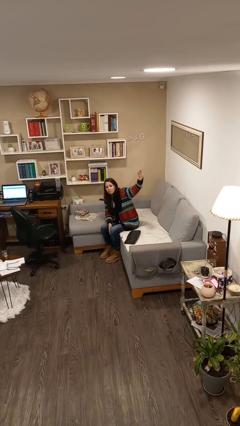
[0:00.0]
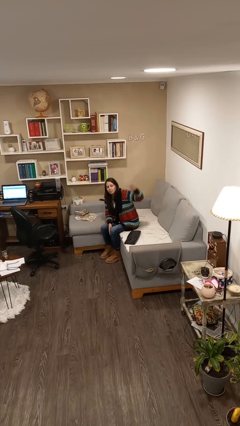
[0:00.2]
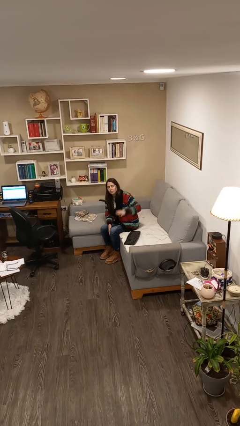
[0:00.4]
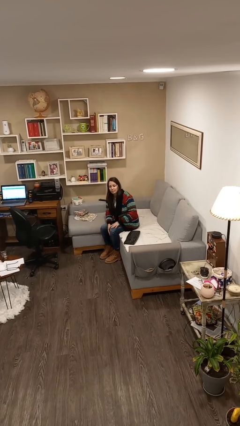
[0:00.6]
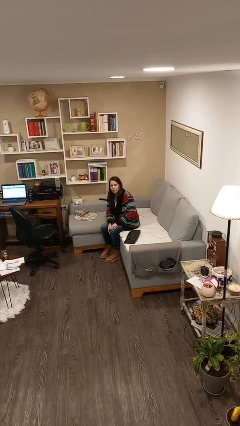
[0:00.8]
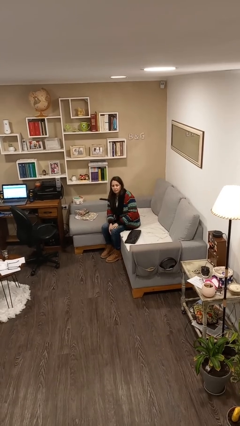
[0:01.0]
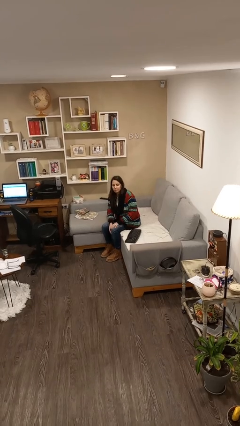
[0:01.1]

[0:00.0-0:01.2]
person gestures lower hand

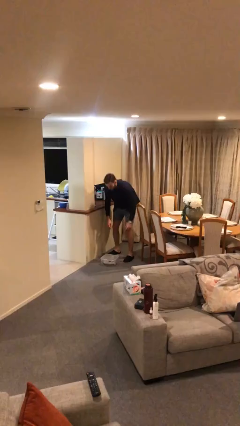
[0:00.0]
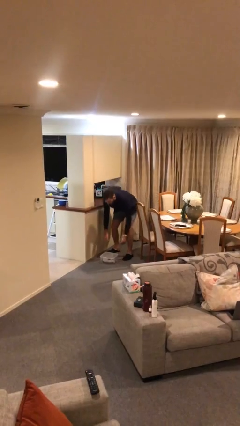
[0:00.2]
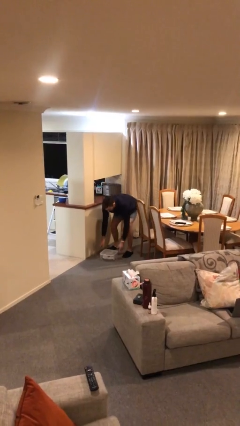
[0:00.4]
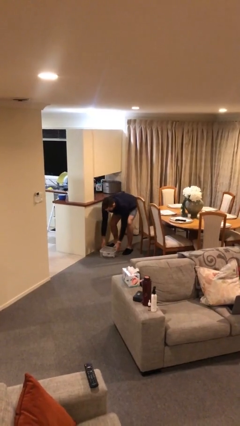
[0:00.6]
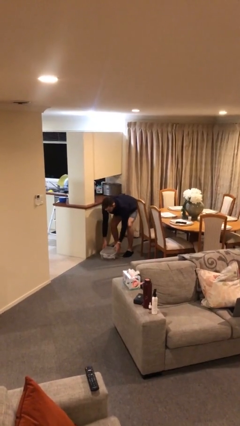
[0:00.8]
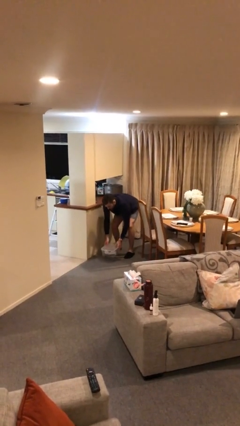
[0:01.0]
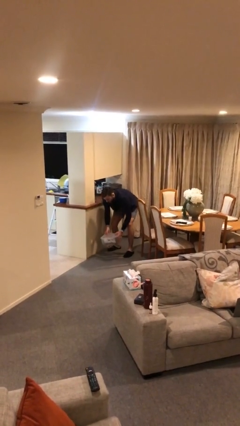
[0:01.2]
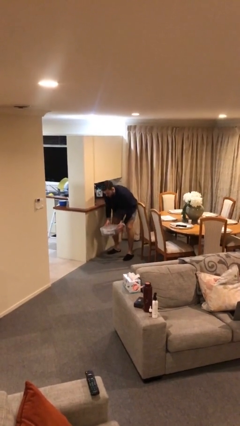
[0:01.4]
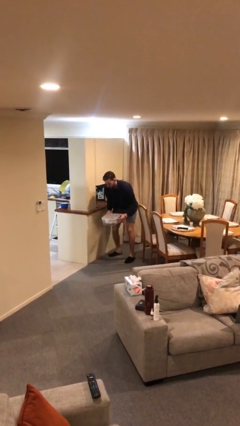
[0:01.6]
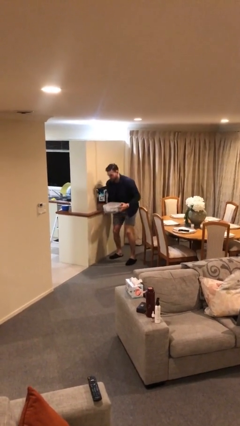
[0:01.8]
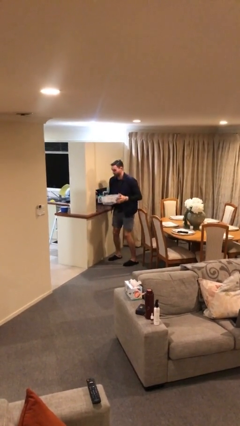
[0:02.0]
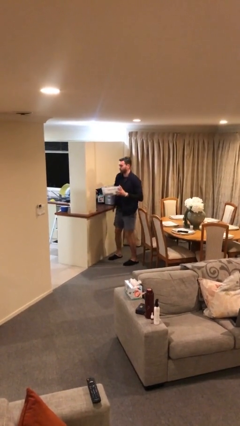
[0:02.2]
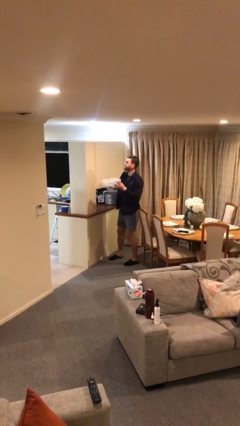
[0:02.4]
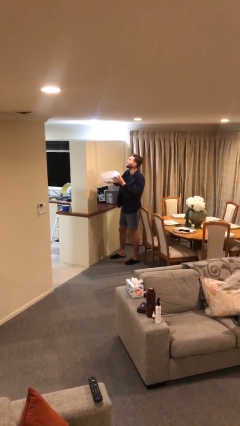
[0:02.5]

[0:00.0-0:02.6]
person picks up object from floor

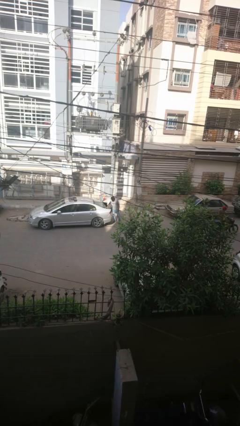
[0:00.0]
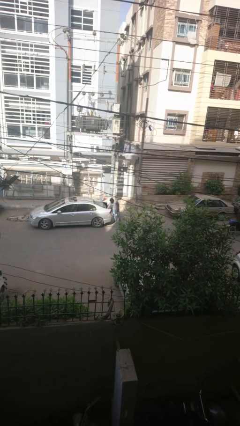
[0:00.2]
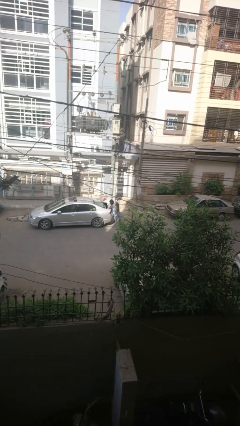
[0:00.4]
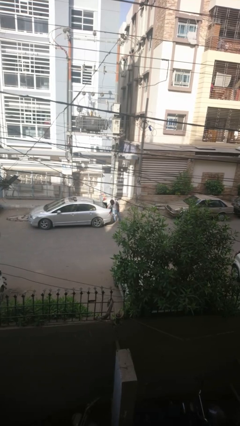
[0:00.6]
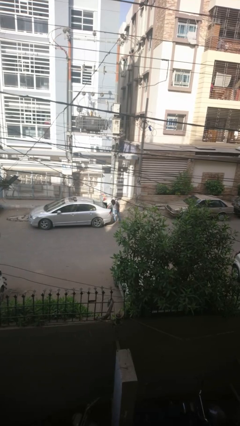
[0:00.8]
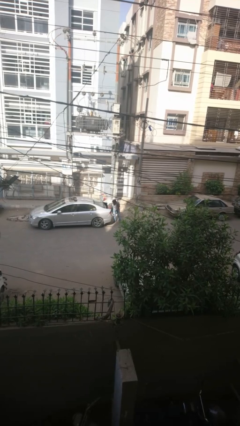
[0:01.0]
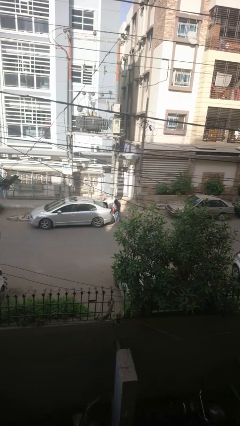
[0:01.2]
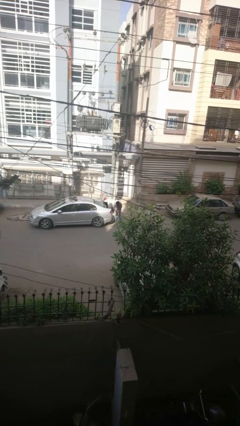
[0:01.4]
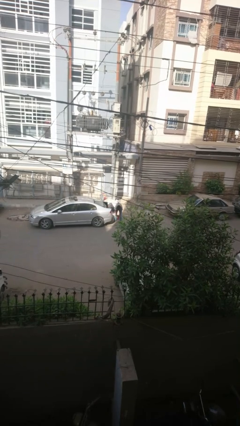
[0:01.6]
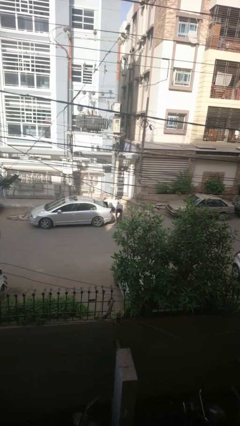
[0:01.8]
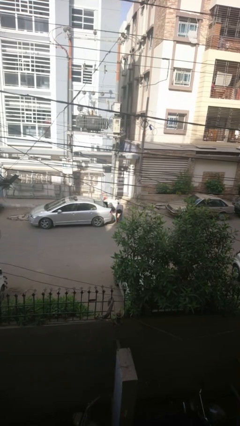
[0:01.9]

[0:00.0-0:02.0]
person unloads car

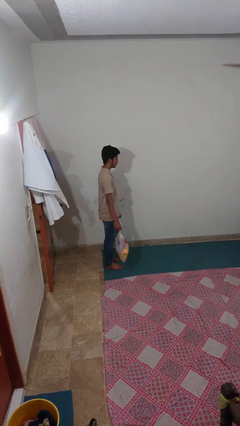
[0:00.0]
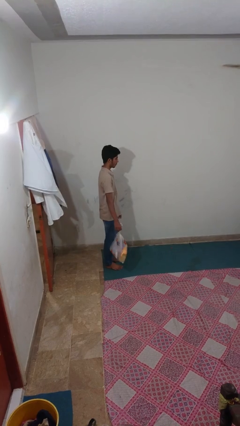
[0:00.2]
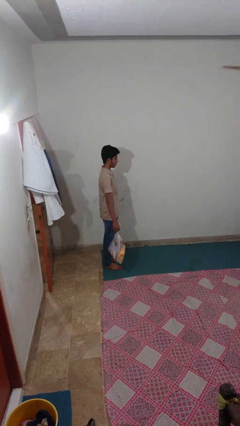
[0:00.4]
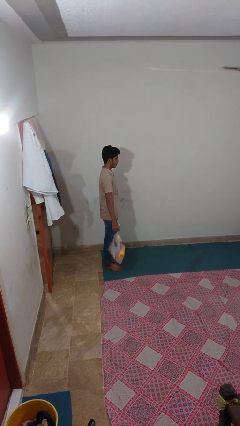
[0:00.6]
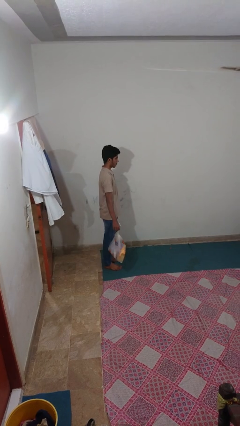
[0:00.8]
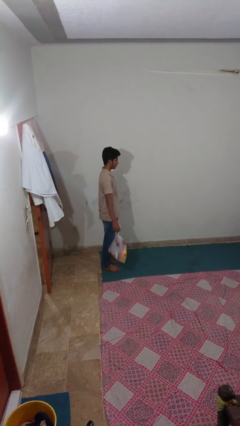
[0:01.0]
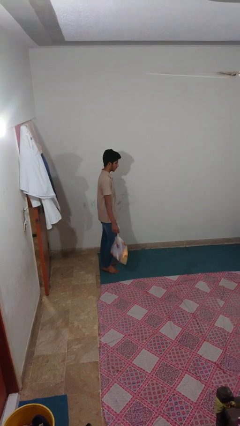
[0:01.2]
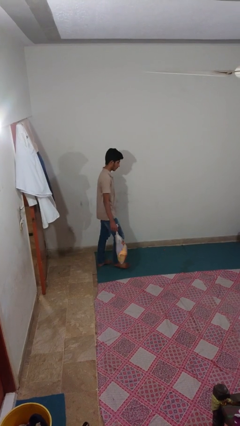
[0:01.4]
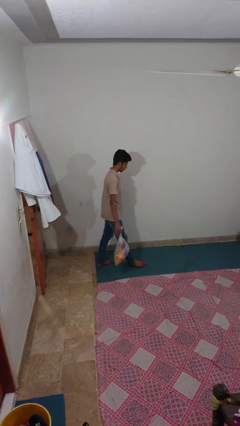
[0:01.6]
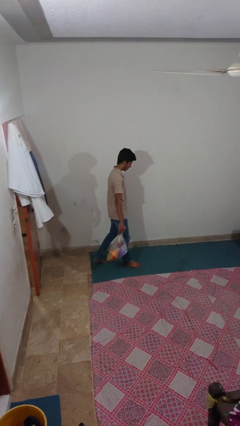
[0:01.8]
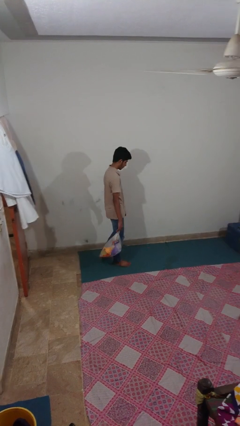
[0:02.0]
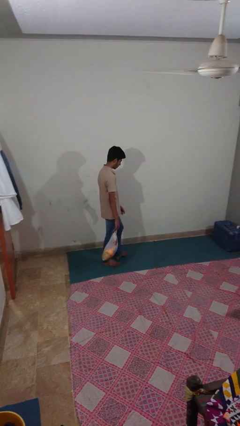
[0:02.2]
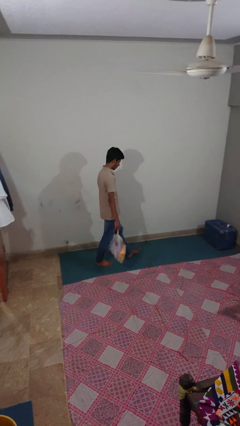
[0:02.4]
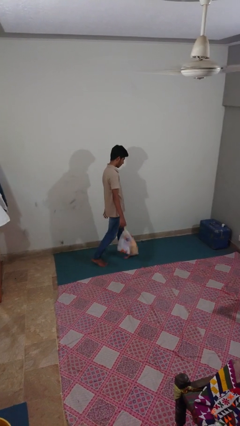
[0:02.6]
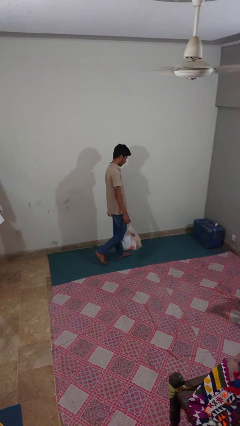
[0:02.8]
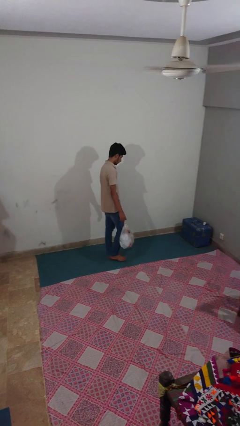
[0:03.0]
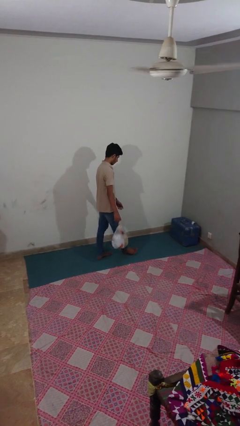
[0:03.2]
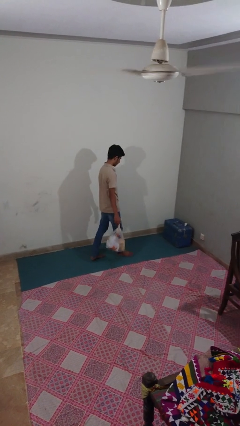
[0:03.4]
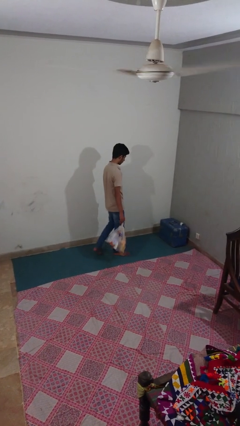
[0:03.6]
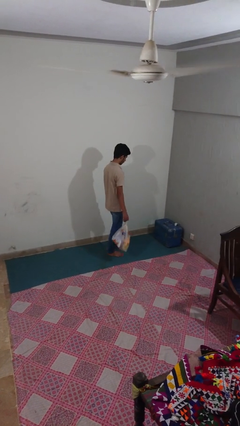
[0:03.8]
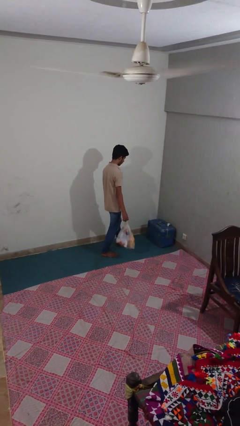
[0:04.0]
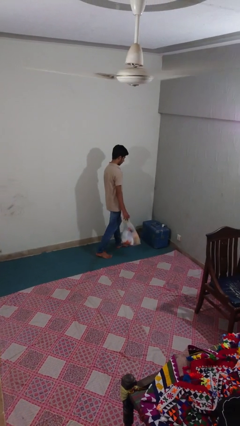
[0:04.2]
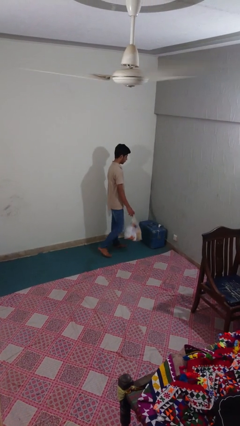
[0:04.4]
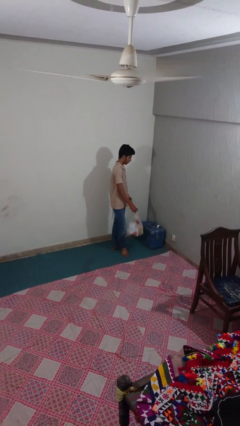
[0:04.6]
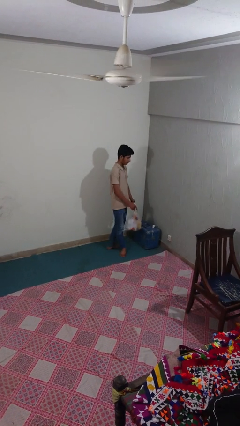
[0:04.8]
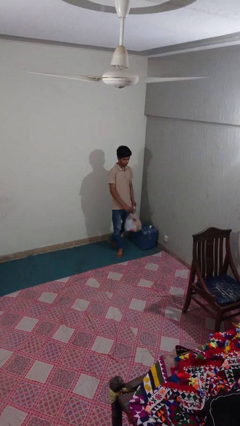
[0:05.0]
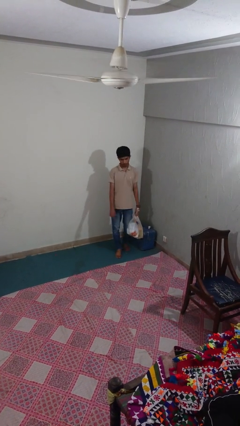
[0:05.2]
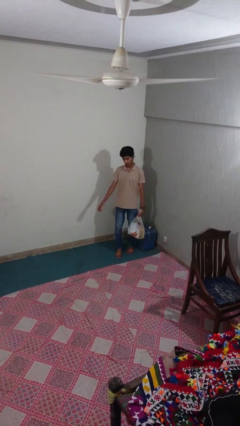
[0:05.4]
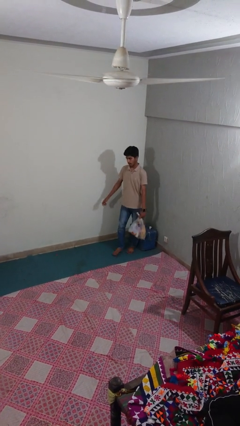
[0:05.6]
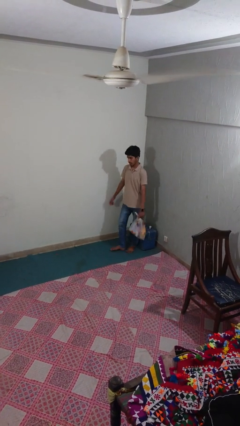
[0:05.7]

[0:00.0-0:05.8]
person carries groceries

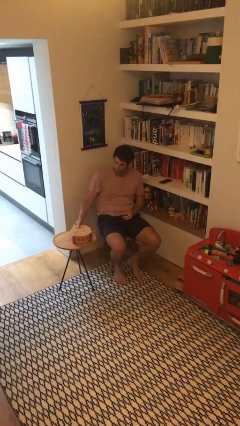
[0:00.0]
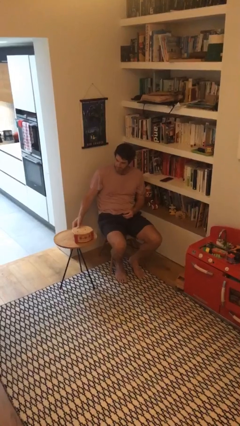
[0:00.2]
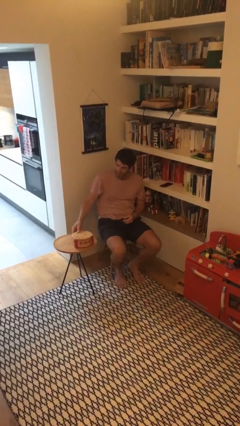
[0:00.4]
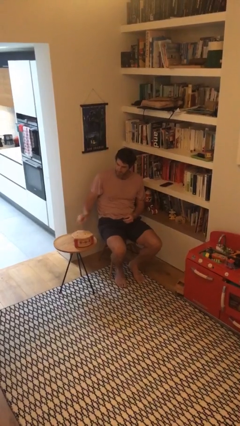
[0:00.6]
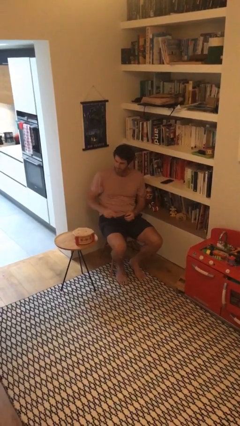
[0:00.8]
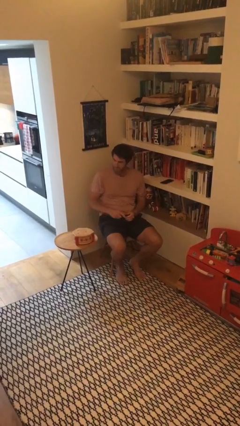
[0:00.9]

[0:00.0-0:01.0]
person puts down object on table

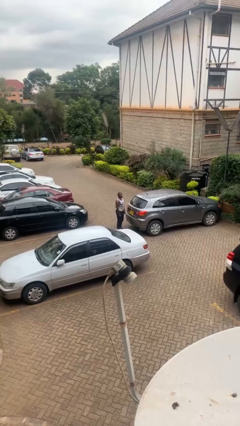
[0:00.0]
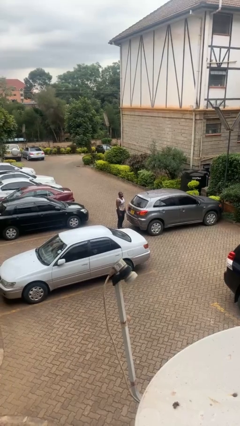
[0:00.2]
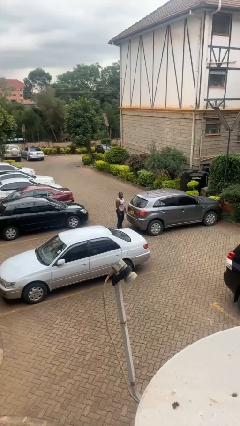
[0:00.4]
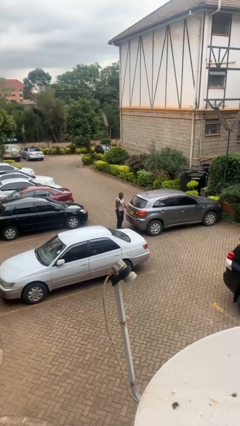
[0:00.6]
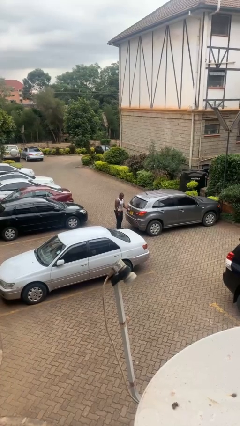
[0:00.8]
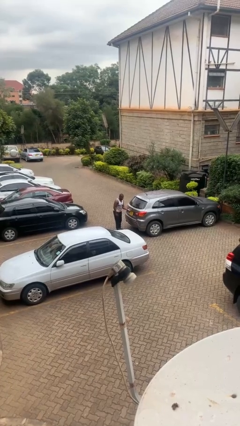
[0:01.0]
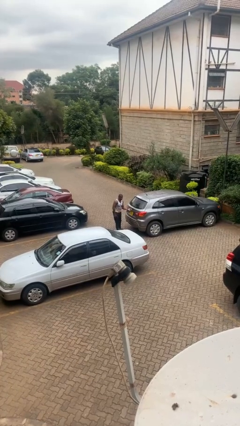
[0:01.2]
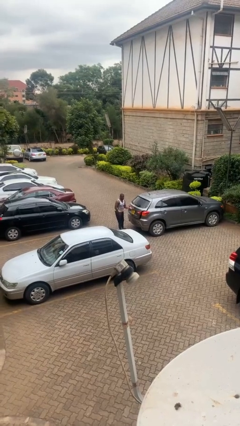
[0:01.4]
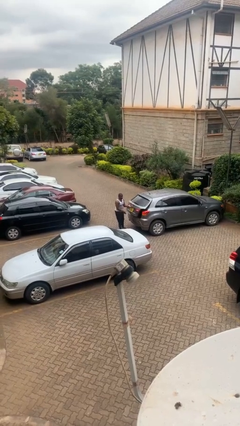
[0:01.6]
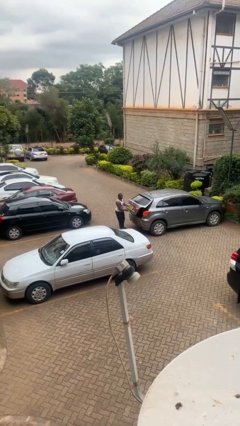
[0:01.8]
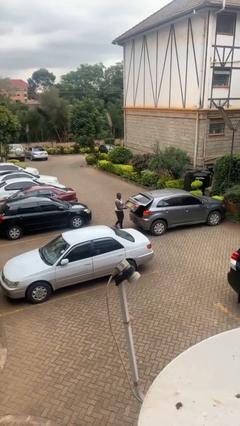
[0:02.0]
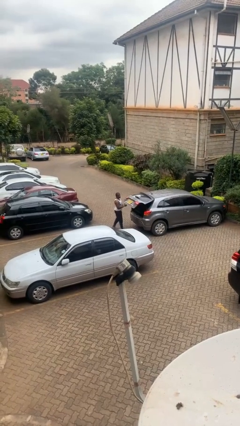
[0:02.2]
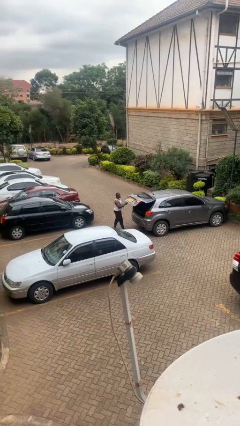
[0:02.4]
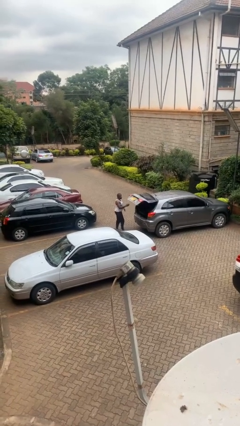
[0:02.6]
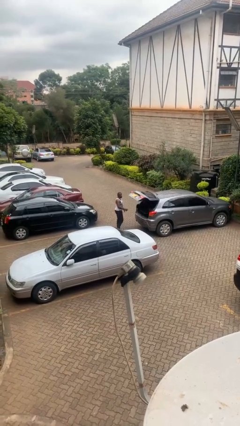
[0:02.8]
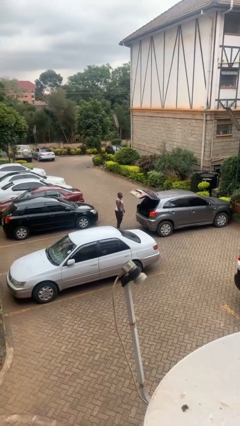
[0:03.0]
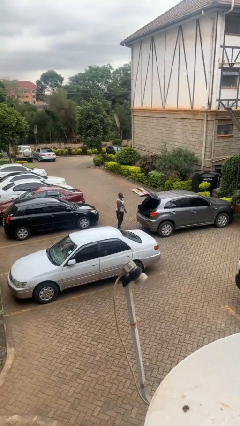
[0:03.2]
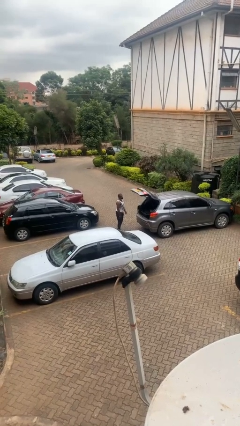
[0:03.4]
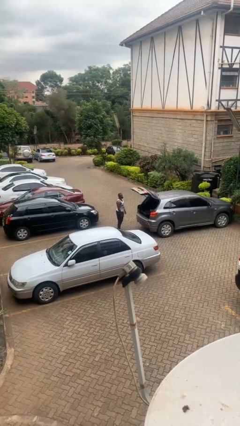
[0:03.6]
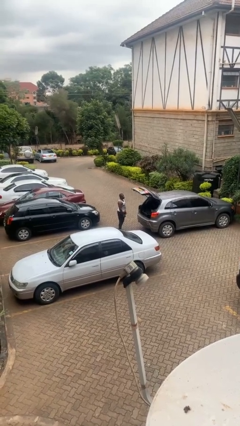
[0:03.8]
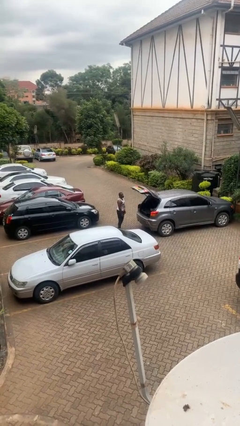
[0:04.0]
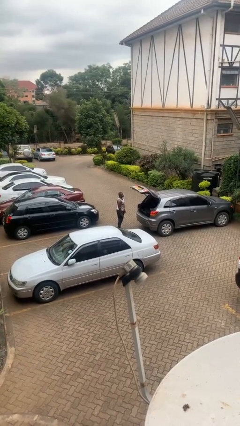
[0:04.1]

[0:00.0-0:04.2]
person opens car trunk

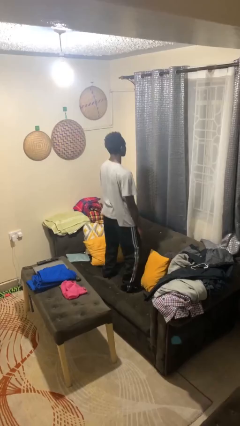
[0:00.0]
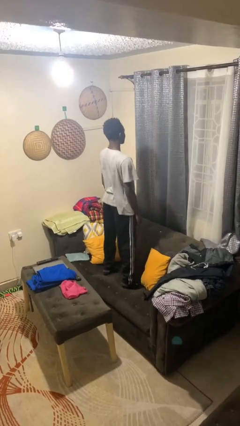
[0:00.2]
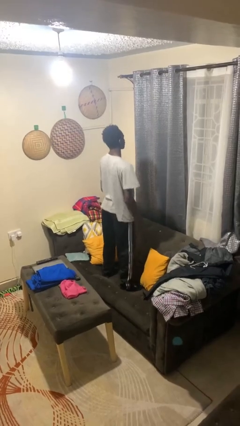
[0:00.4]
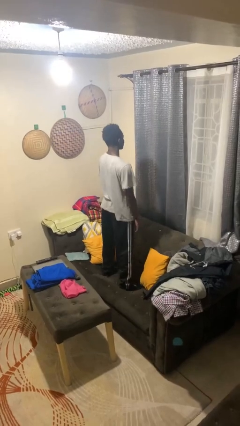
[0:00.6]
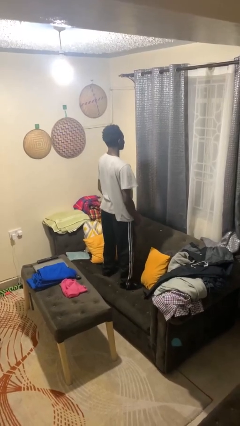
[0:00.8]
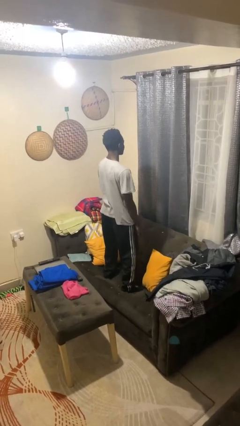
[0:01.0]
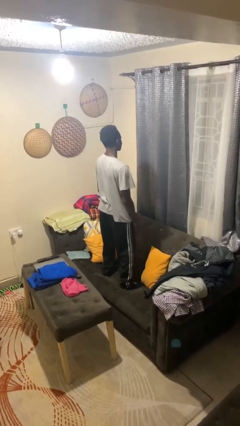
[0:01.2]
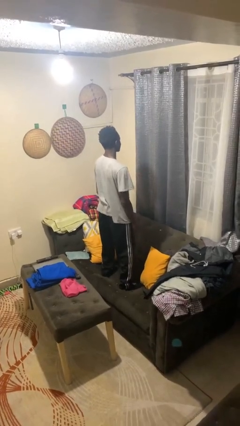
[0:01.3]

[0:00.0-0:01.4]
person jumps on couch
